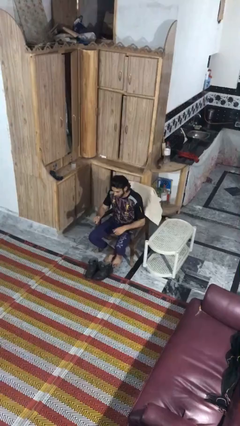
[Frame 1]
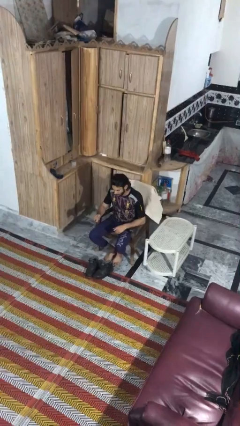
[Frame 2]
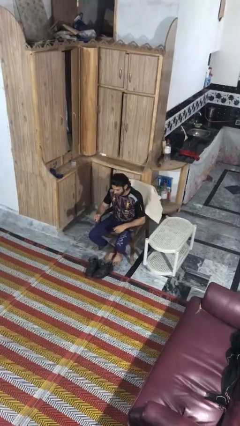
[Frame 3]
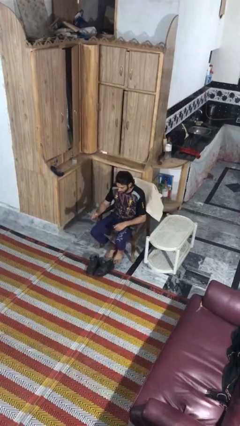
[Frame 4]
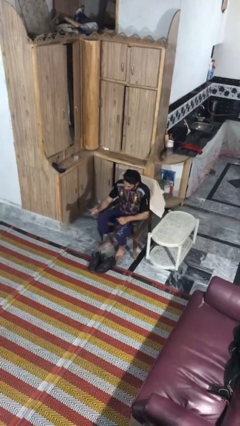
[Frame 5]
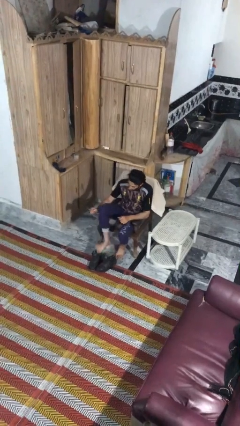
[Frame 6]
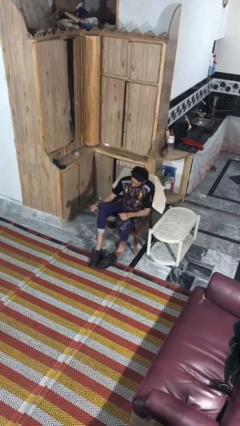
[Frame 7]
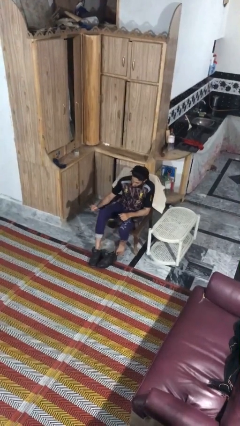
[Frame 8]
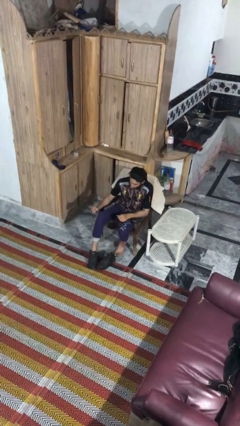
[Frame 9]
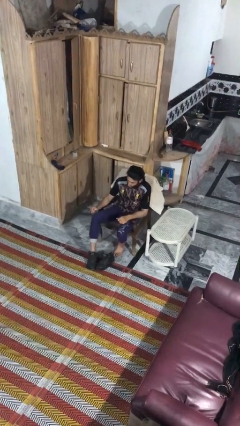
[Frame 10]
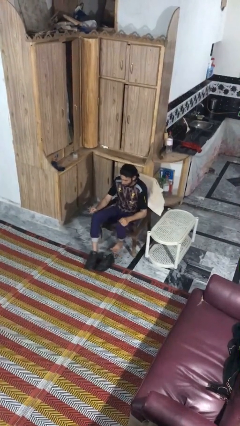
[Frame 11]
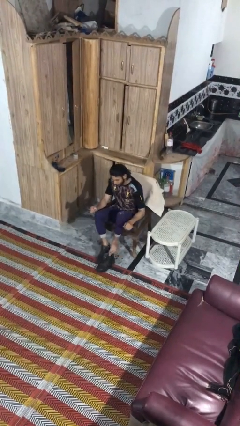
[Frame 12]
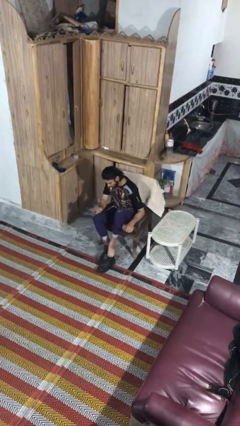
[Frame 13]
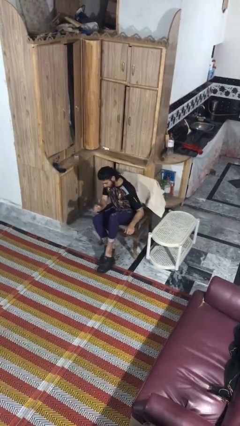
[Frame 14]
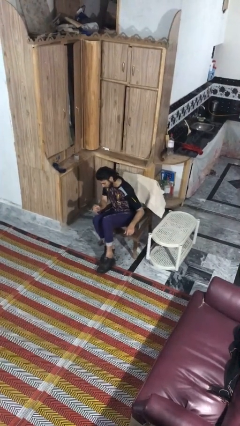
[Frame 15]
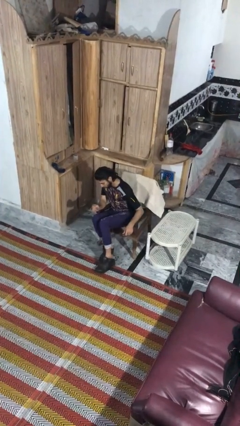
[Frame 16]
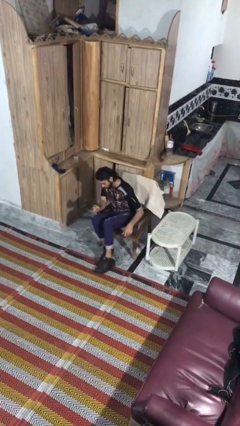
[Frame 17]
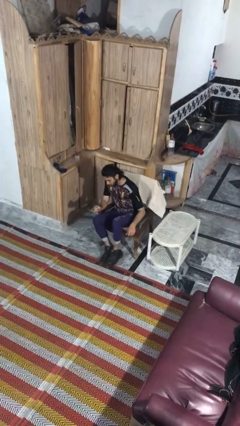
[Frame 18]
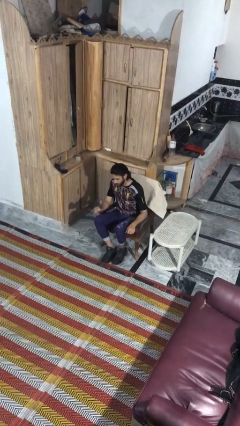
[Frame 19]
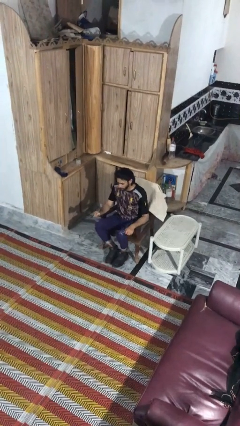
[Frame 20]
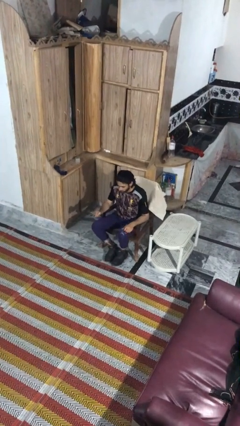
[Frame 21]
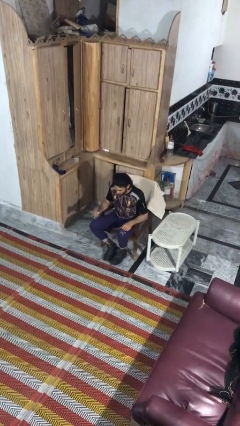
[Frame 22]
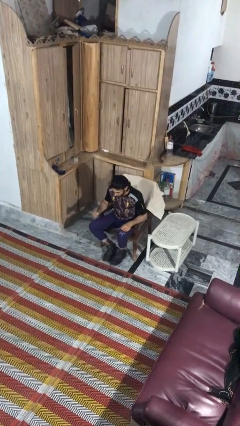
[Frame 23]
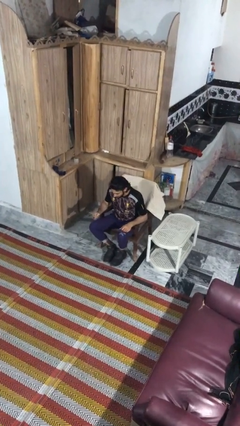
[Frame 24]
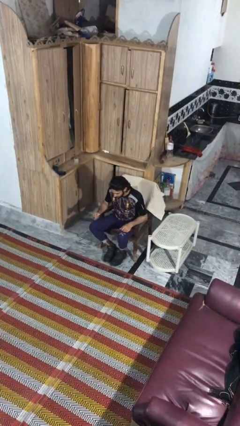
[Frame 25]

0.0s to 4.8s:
person puts on boots

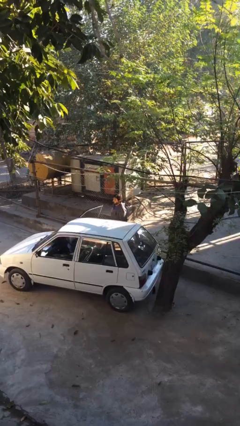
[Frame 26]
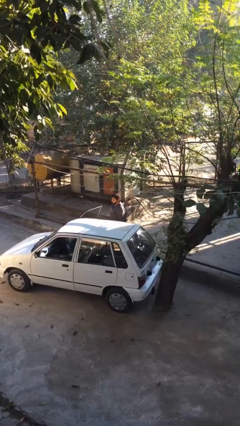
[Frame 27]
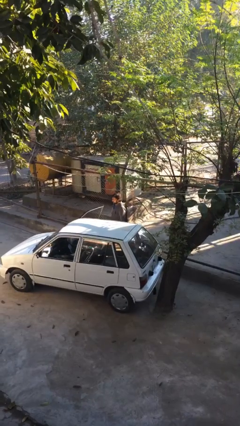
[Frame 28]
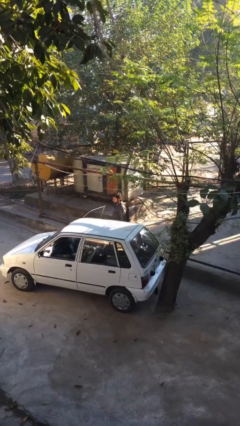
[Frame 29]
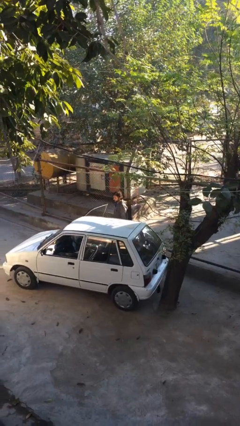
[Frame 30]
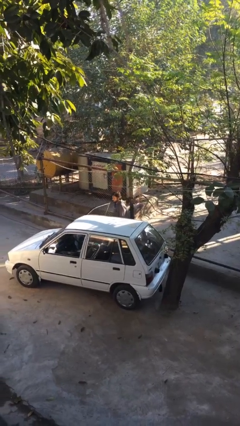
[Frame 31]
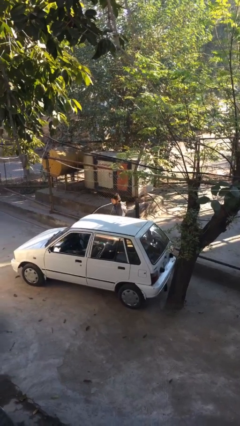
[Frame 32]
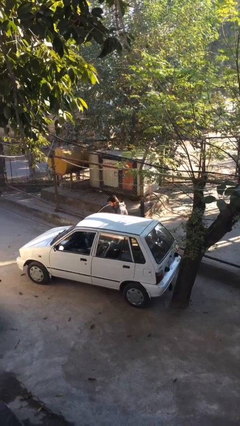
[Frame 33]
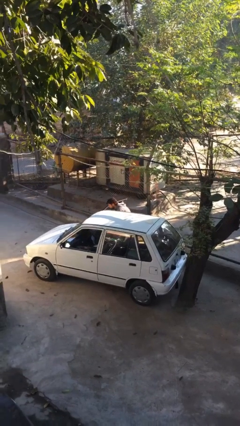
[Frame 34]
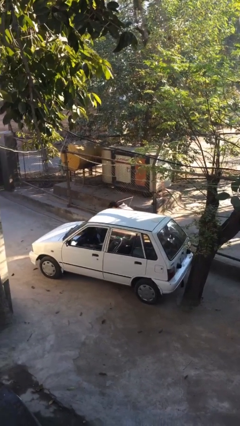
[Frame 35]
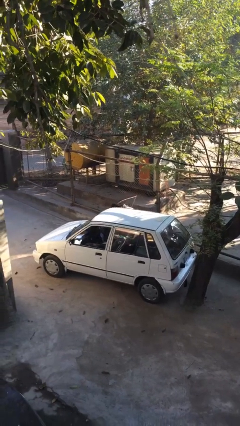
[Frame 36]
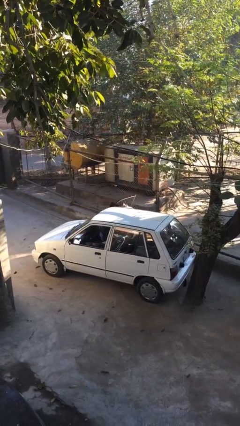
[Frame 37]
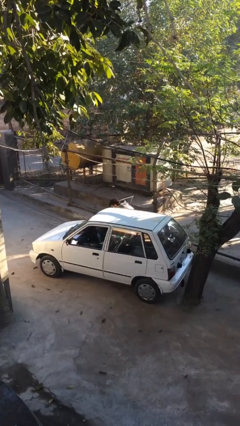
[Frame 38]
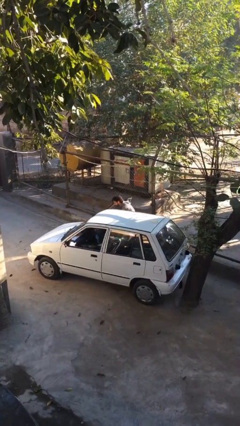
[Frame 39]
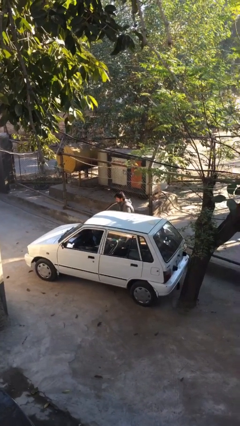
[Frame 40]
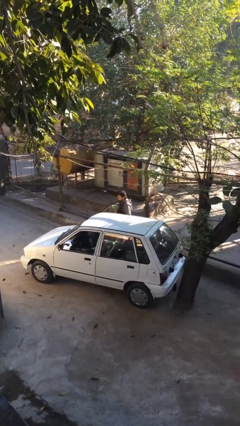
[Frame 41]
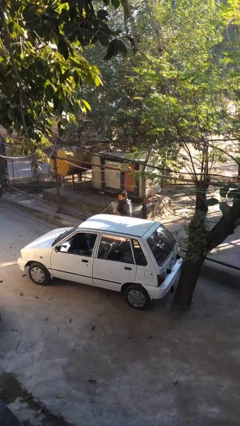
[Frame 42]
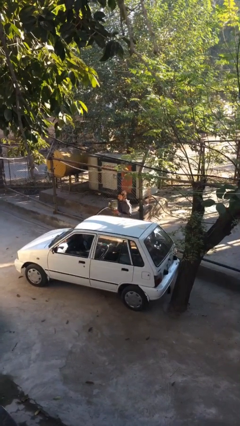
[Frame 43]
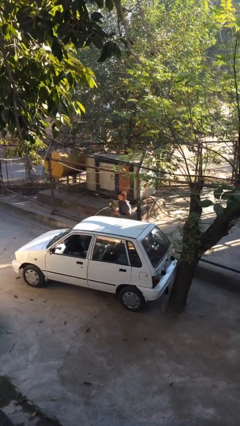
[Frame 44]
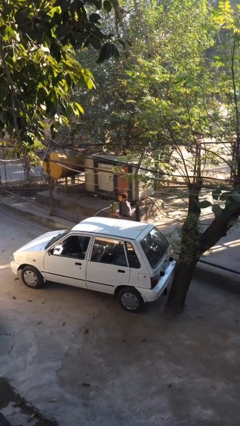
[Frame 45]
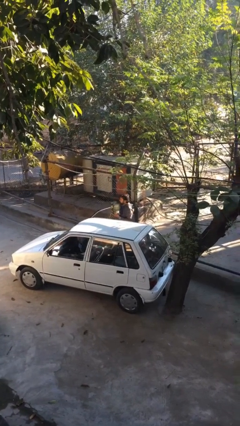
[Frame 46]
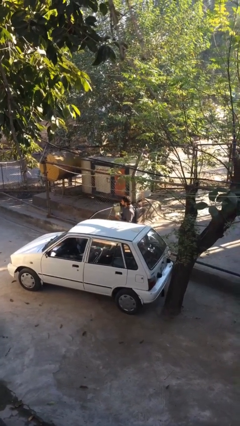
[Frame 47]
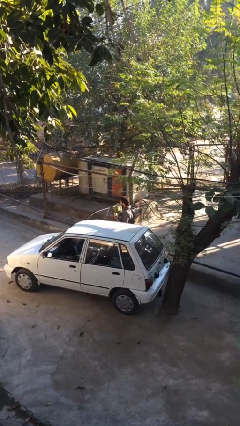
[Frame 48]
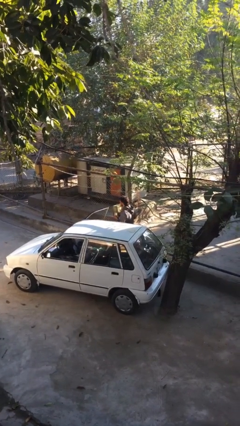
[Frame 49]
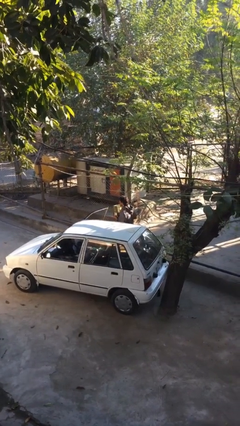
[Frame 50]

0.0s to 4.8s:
person unloads car

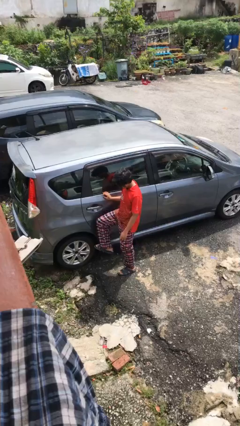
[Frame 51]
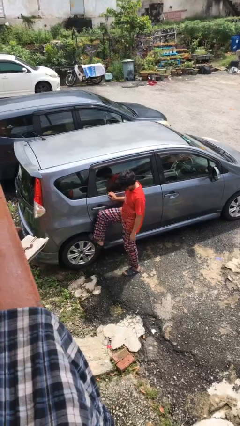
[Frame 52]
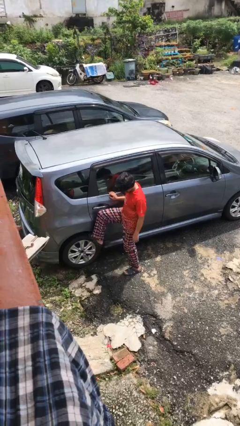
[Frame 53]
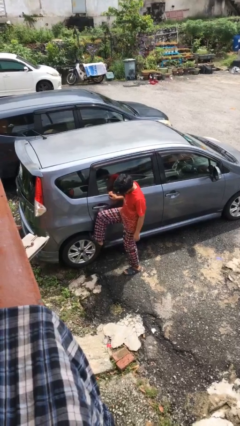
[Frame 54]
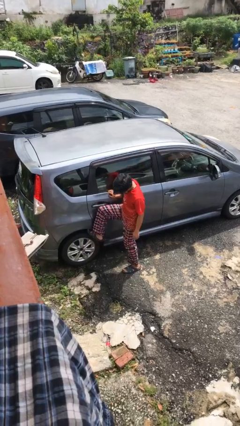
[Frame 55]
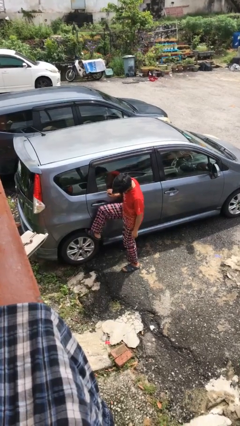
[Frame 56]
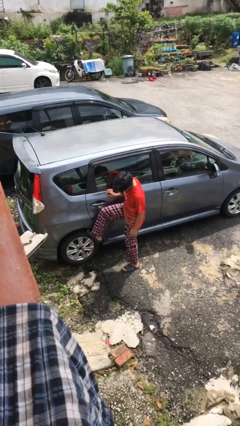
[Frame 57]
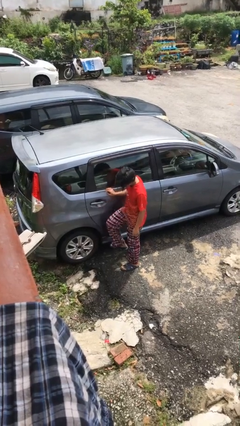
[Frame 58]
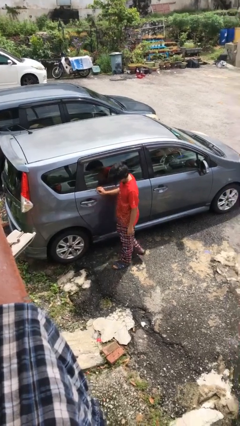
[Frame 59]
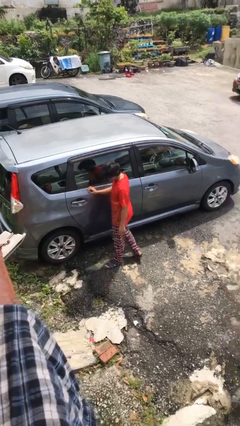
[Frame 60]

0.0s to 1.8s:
person kicks car tires

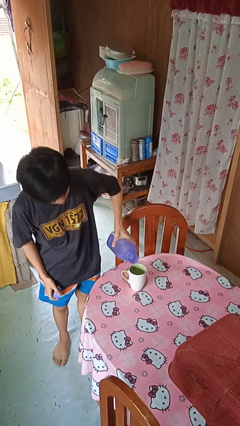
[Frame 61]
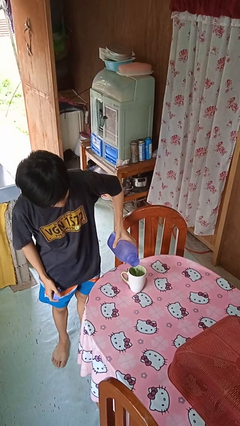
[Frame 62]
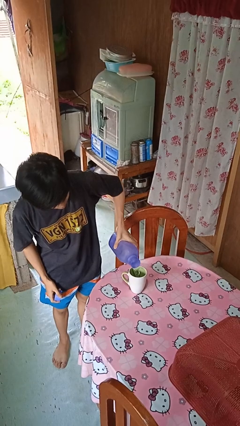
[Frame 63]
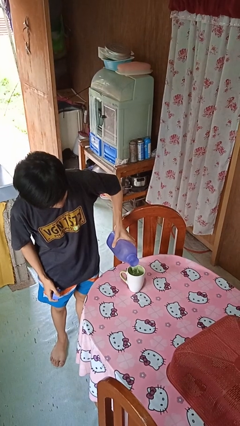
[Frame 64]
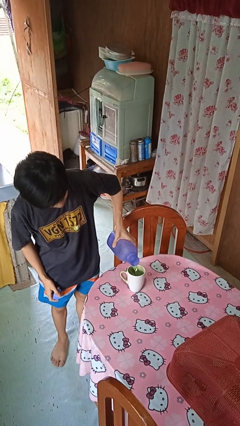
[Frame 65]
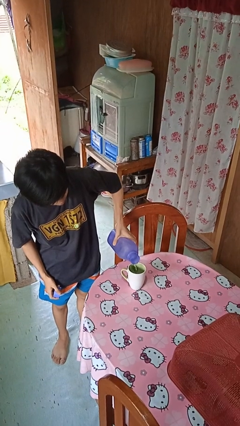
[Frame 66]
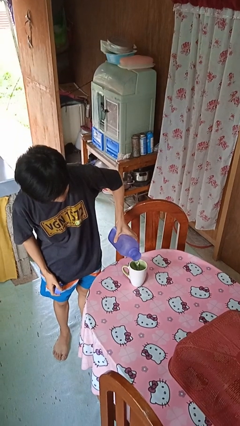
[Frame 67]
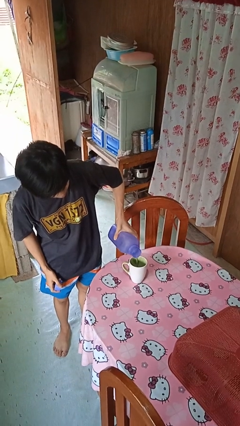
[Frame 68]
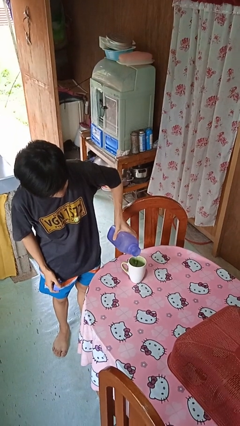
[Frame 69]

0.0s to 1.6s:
person pours liquid into cup

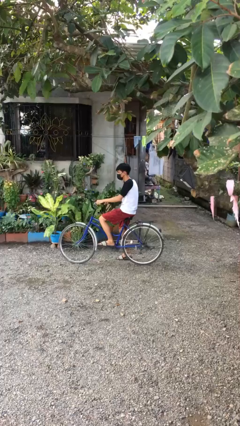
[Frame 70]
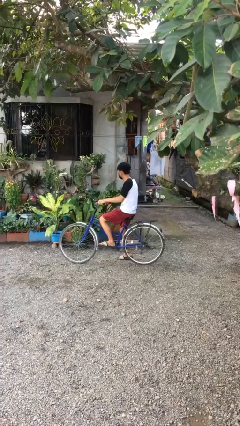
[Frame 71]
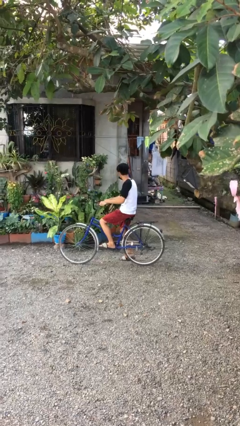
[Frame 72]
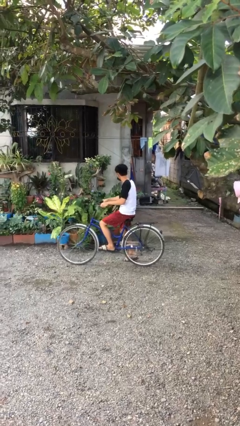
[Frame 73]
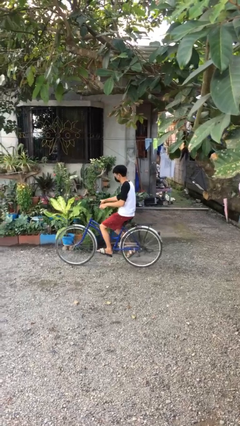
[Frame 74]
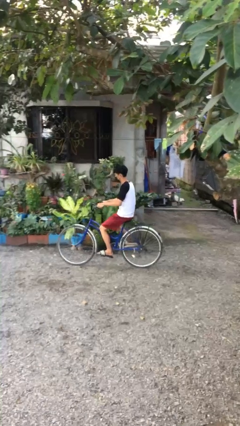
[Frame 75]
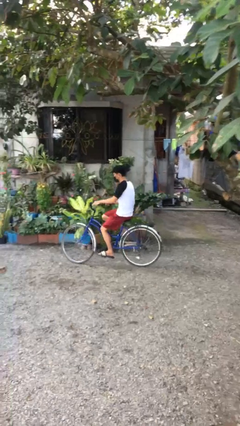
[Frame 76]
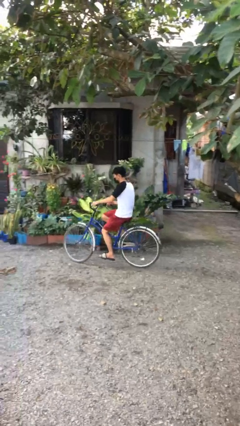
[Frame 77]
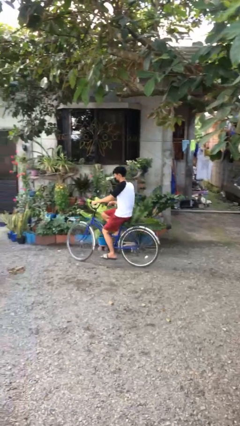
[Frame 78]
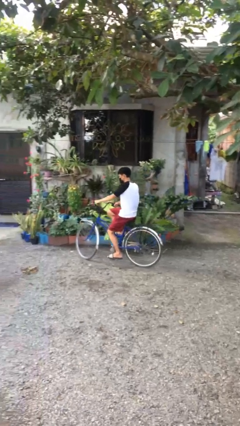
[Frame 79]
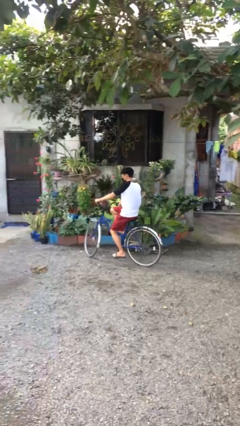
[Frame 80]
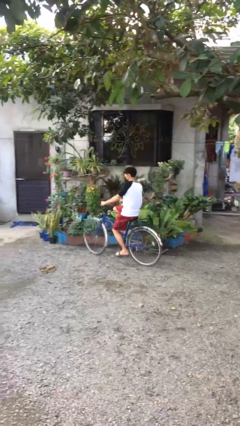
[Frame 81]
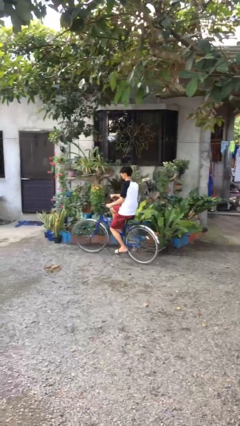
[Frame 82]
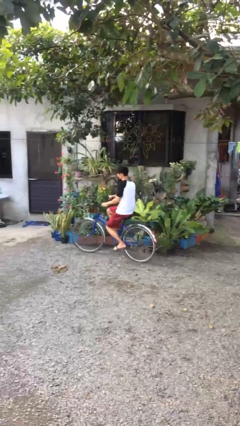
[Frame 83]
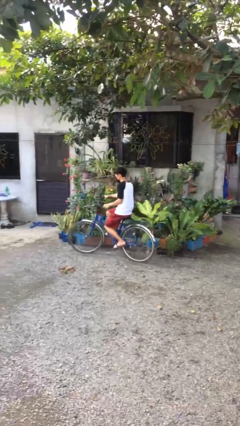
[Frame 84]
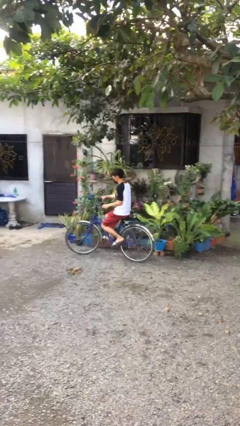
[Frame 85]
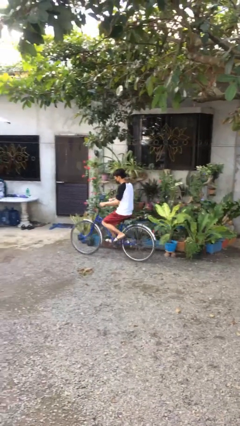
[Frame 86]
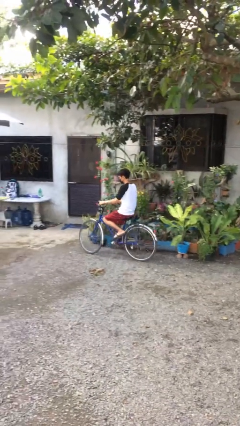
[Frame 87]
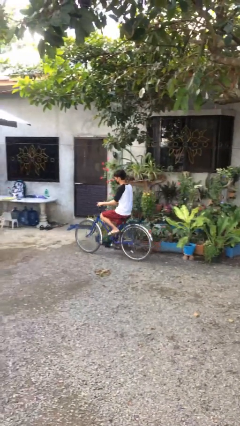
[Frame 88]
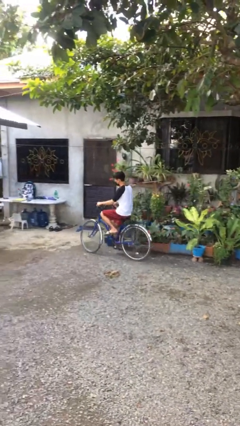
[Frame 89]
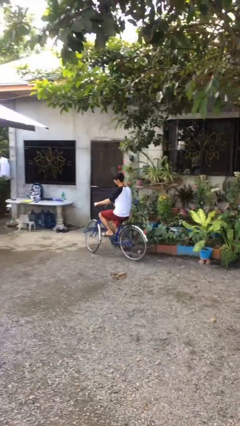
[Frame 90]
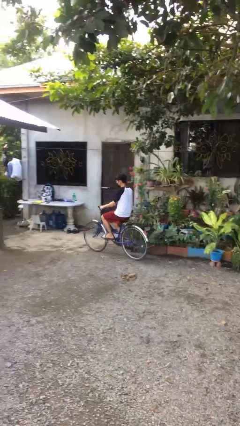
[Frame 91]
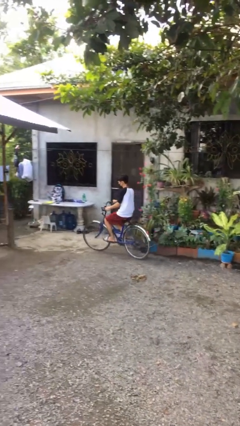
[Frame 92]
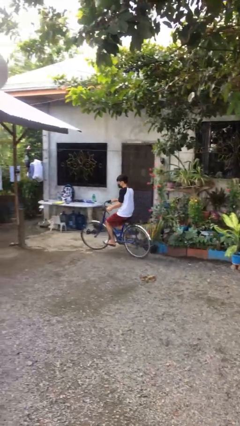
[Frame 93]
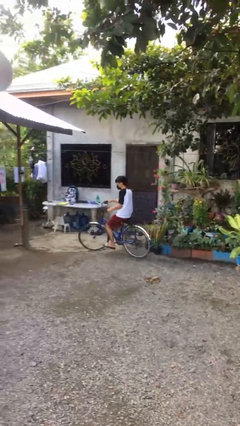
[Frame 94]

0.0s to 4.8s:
person rides bicycle
